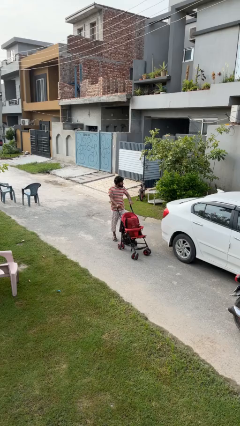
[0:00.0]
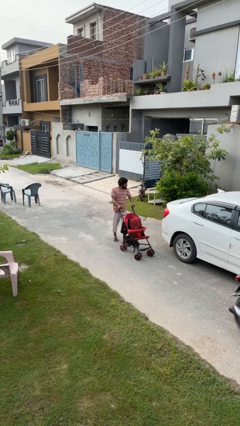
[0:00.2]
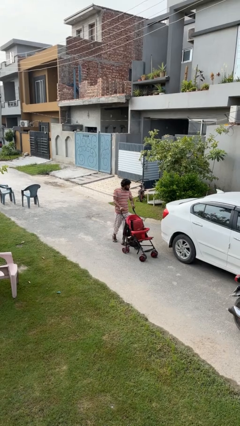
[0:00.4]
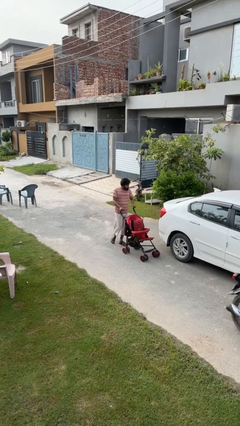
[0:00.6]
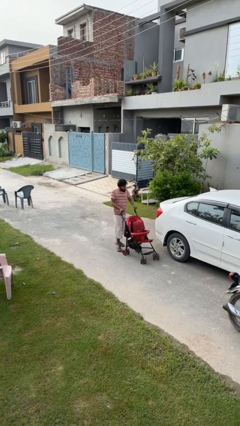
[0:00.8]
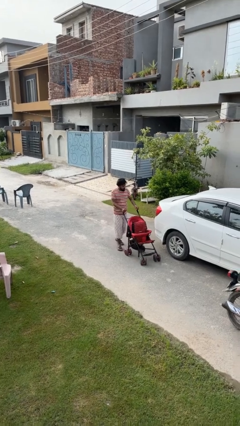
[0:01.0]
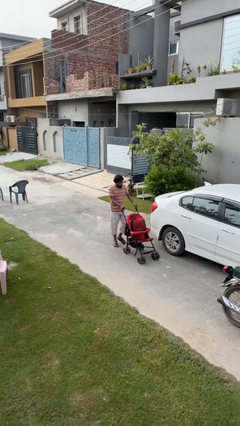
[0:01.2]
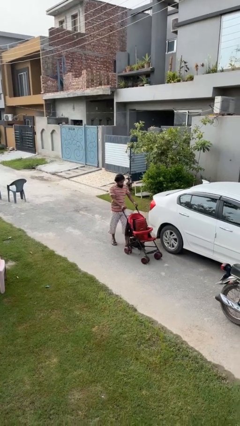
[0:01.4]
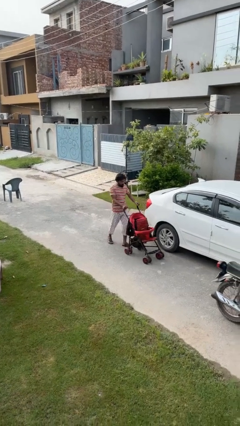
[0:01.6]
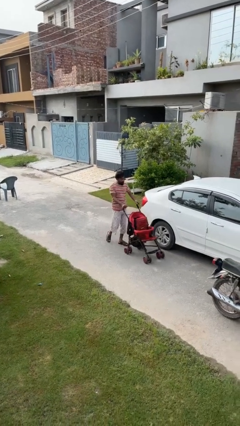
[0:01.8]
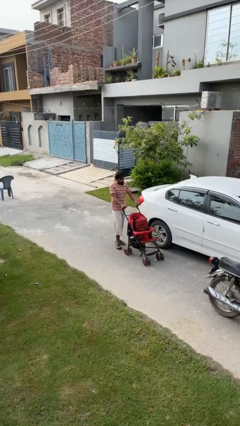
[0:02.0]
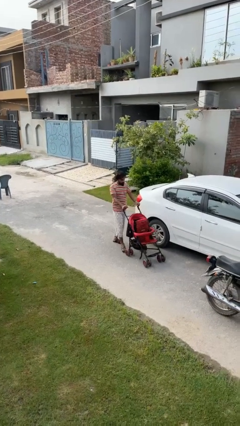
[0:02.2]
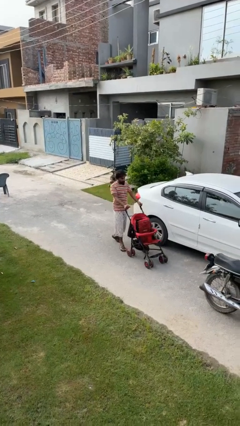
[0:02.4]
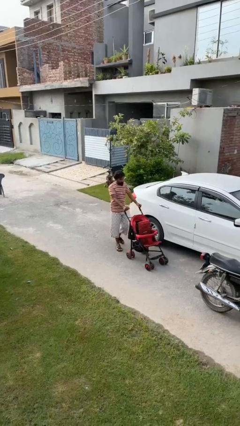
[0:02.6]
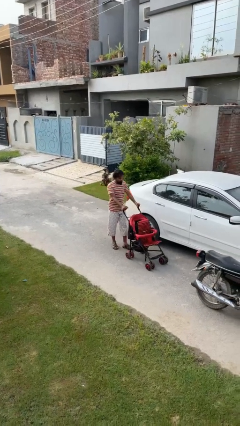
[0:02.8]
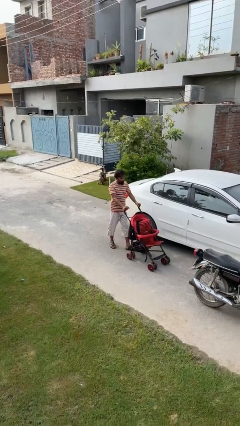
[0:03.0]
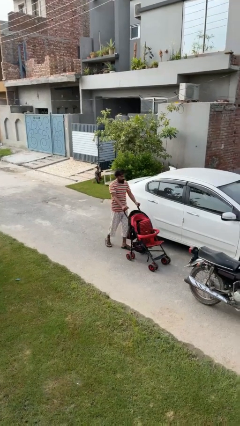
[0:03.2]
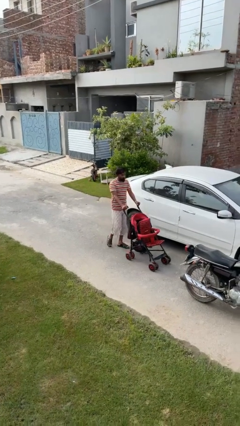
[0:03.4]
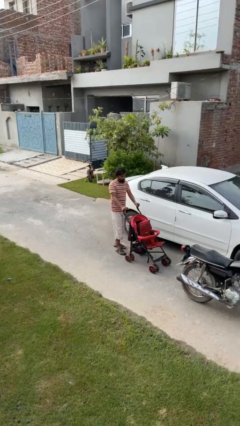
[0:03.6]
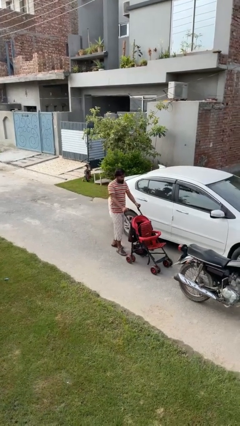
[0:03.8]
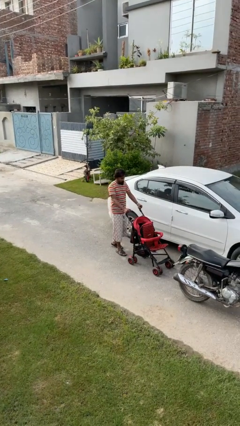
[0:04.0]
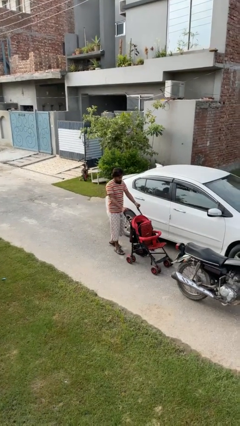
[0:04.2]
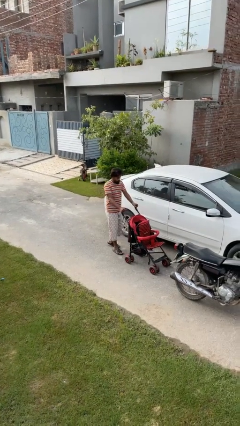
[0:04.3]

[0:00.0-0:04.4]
person pushes wheeled cart

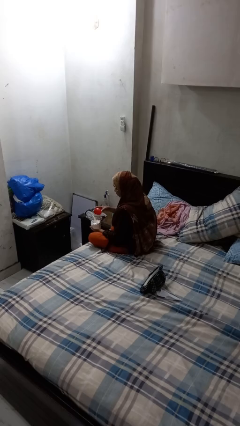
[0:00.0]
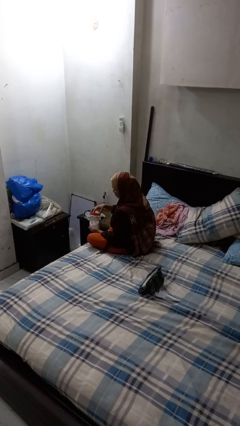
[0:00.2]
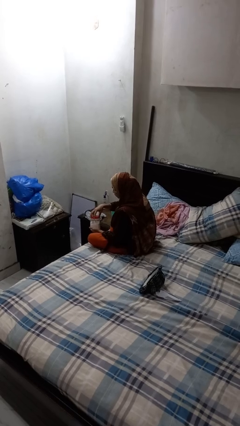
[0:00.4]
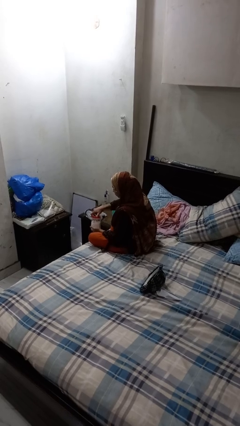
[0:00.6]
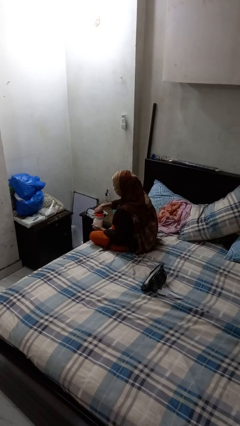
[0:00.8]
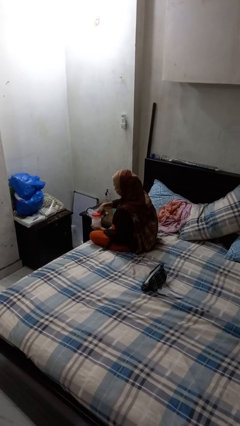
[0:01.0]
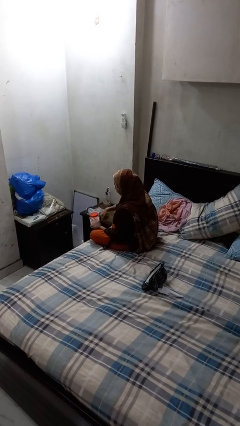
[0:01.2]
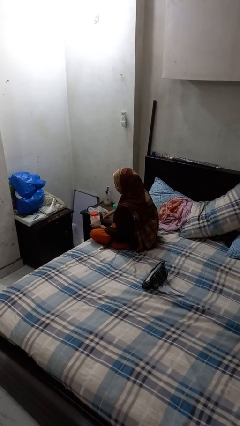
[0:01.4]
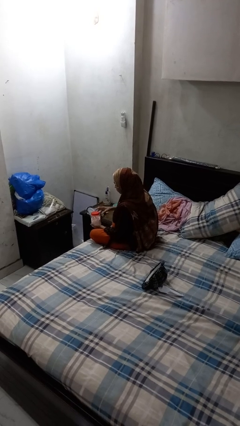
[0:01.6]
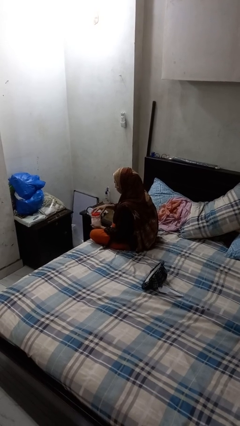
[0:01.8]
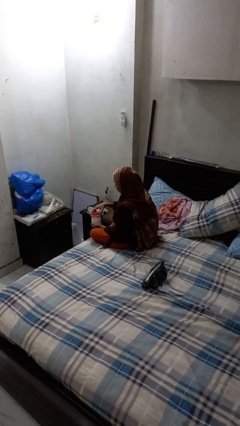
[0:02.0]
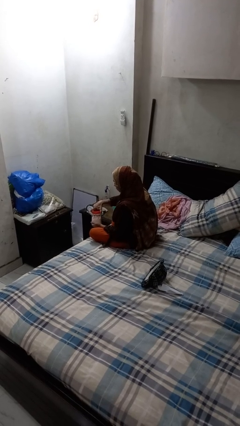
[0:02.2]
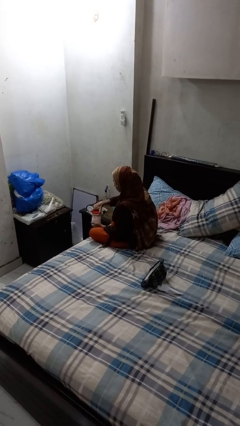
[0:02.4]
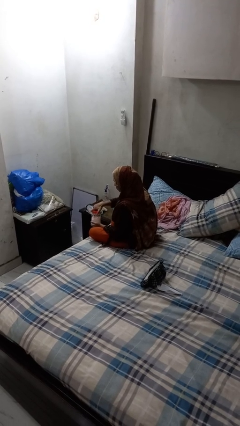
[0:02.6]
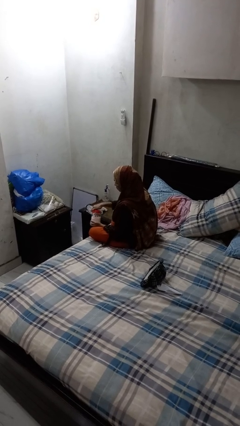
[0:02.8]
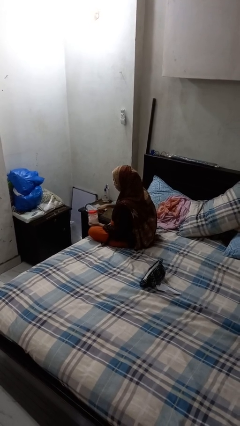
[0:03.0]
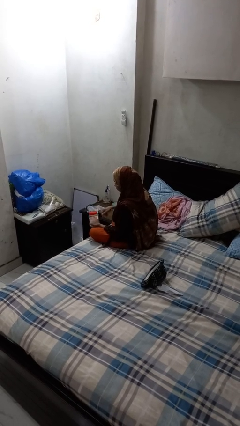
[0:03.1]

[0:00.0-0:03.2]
person closes jar

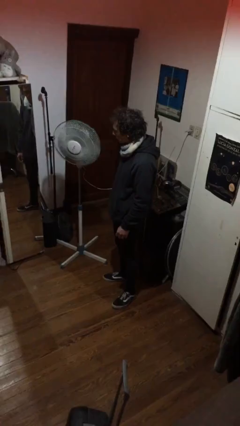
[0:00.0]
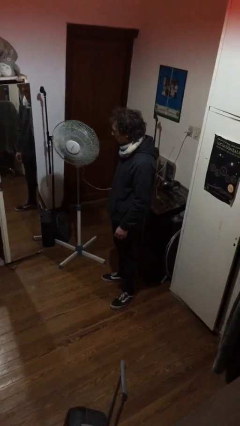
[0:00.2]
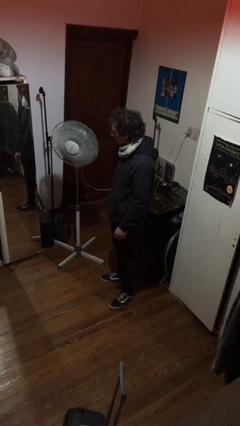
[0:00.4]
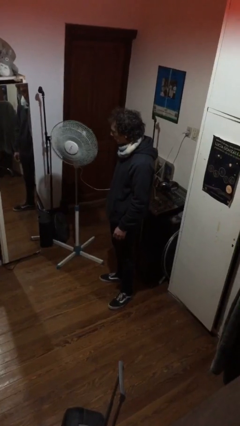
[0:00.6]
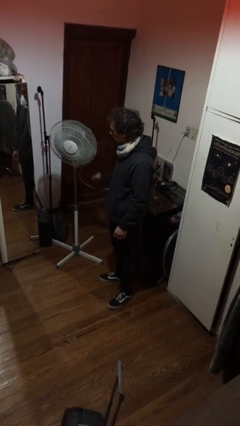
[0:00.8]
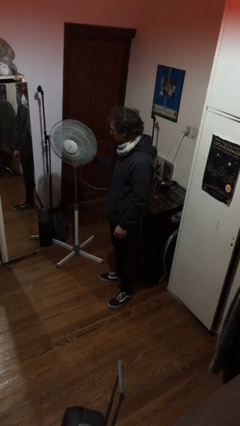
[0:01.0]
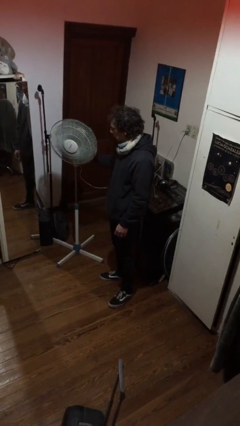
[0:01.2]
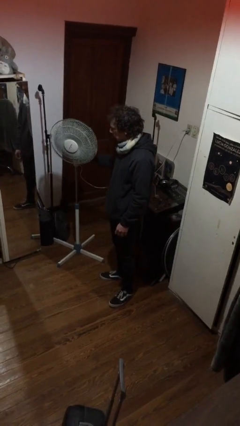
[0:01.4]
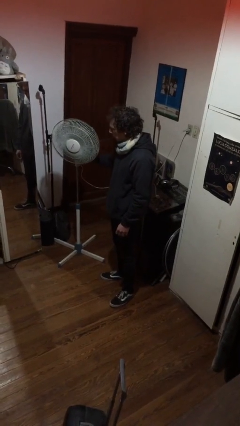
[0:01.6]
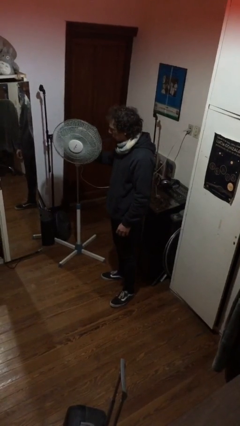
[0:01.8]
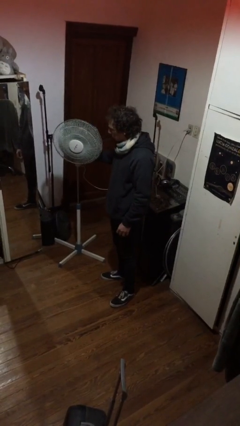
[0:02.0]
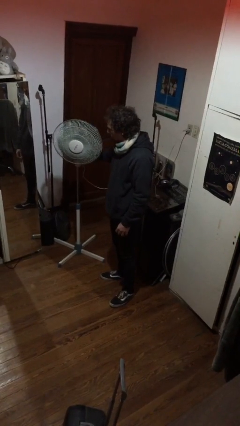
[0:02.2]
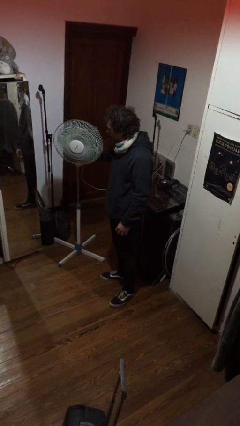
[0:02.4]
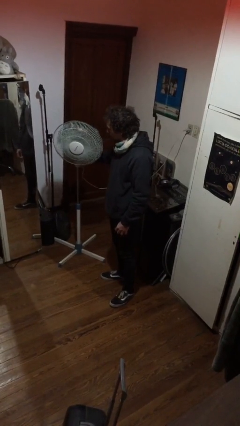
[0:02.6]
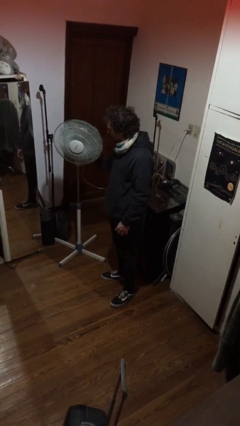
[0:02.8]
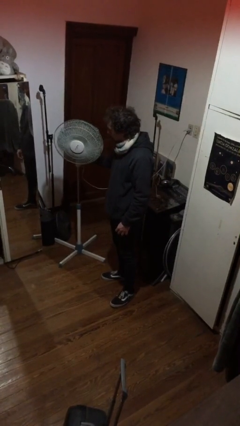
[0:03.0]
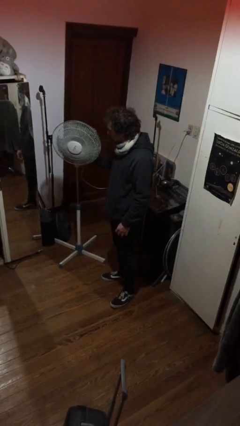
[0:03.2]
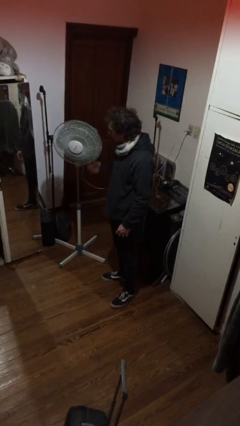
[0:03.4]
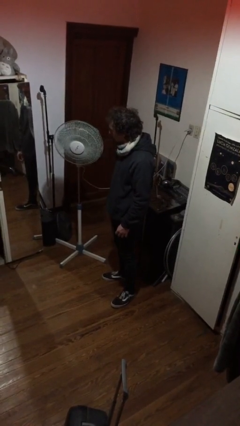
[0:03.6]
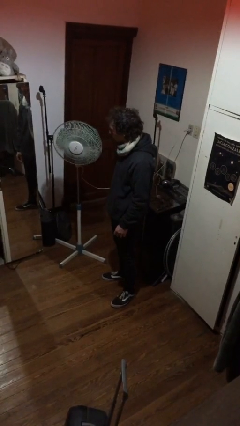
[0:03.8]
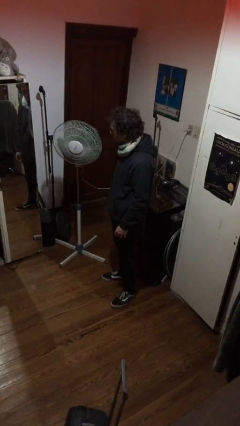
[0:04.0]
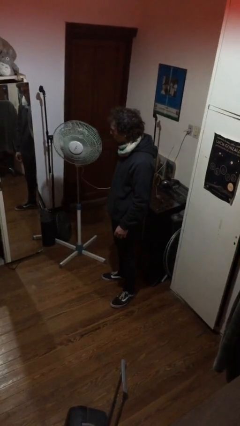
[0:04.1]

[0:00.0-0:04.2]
person turns off fan

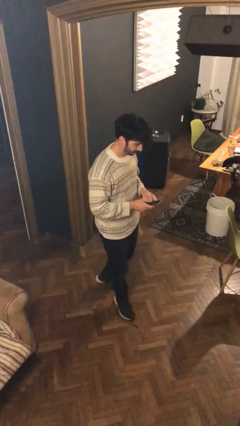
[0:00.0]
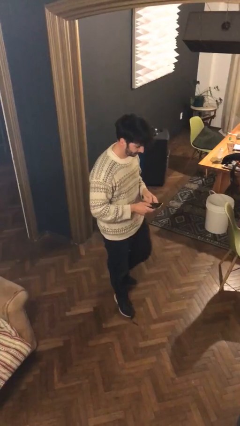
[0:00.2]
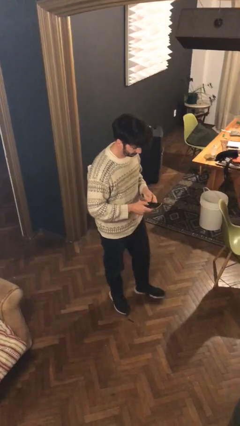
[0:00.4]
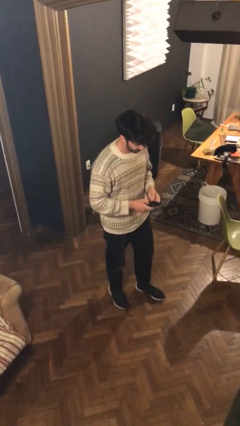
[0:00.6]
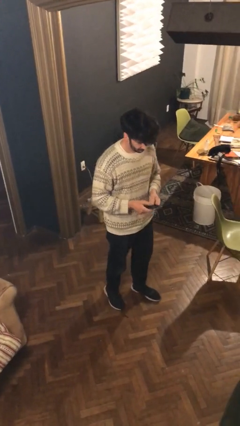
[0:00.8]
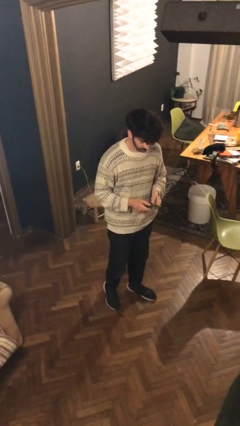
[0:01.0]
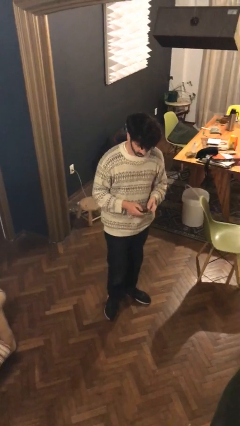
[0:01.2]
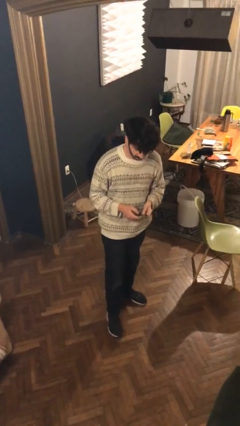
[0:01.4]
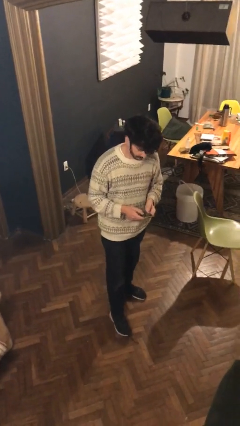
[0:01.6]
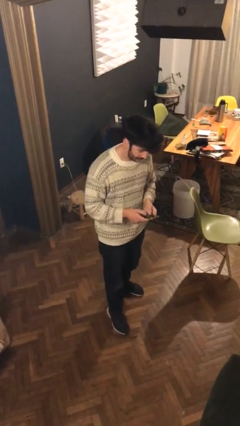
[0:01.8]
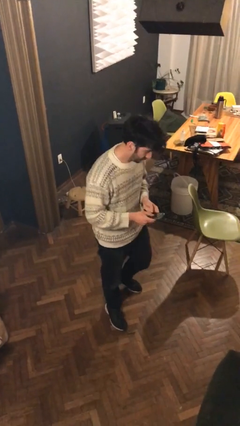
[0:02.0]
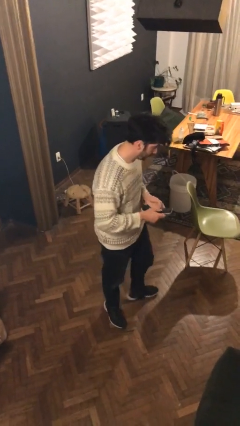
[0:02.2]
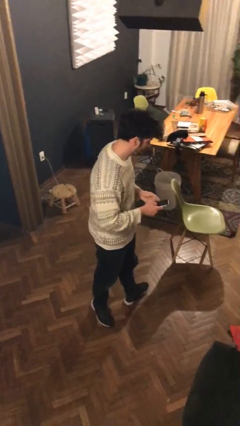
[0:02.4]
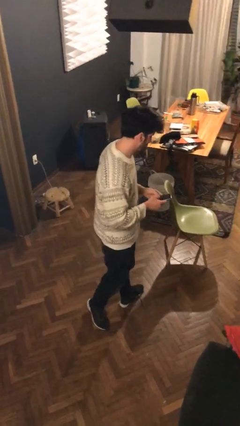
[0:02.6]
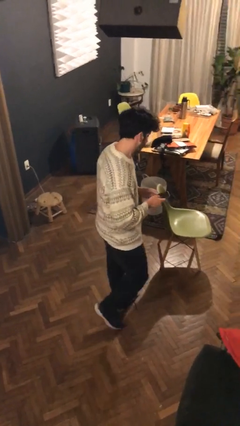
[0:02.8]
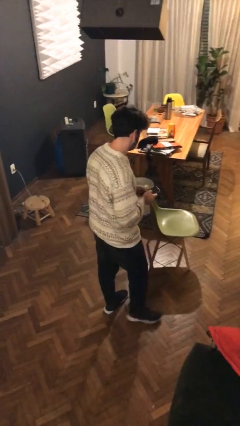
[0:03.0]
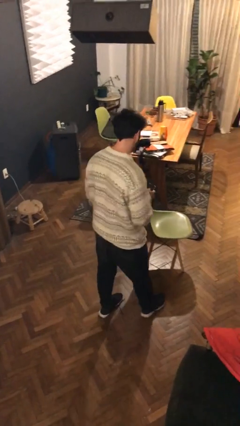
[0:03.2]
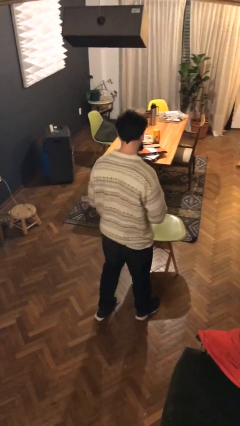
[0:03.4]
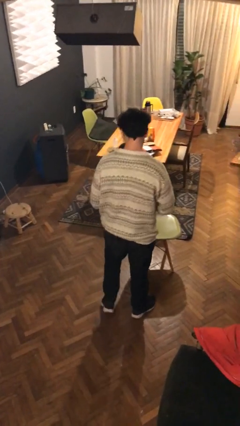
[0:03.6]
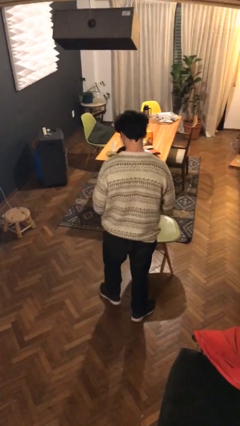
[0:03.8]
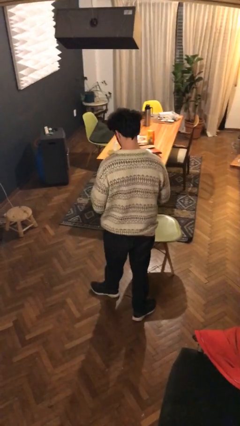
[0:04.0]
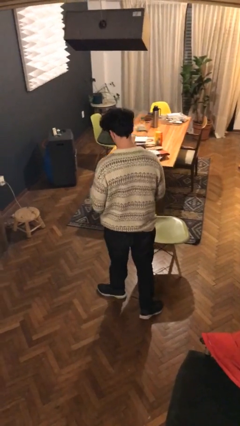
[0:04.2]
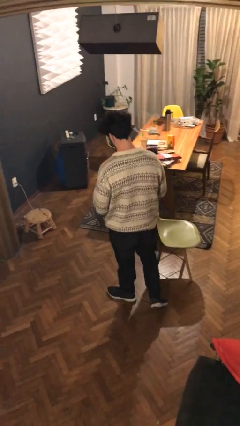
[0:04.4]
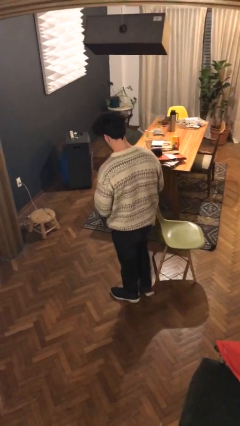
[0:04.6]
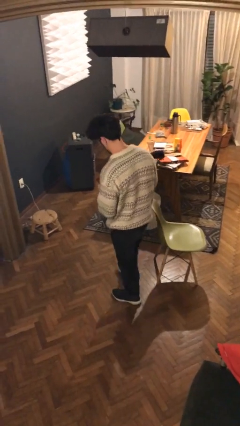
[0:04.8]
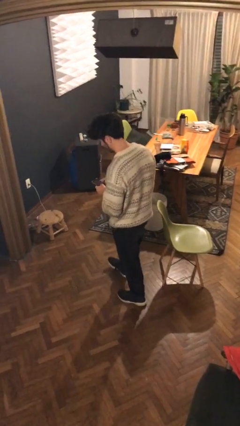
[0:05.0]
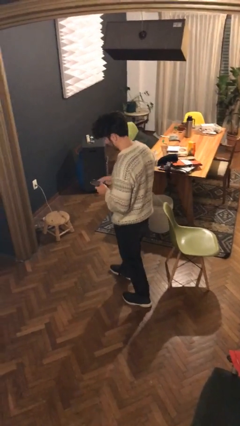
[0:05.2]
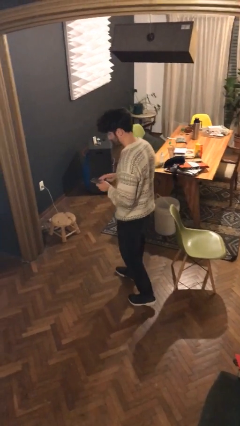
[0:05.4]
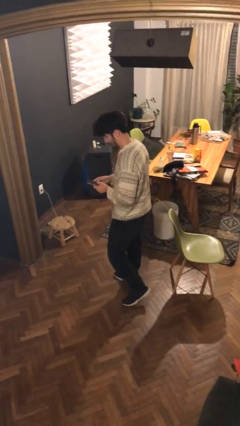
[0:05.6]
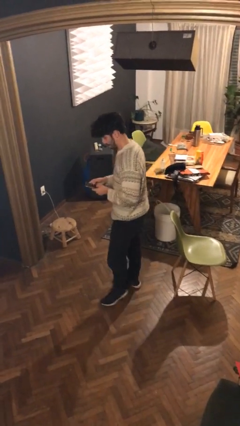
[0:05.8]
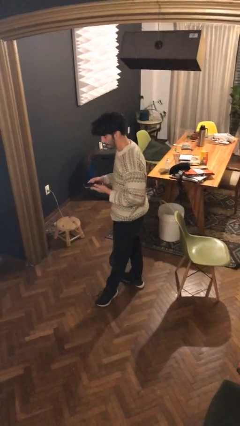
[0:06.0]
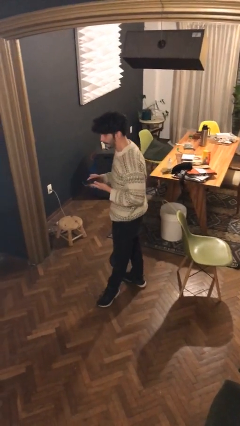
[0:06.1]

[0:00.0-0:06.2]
person texts on phone
